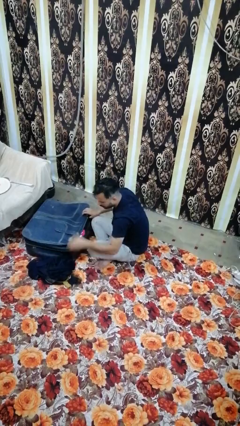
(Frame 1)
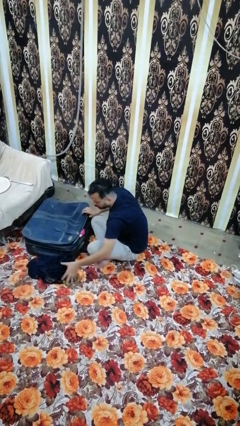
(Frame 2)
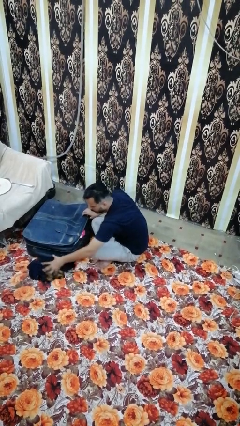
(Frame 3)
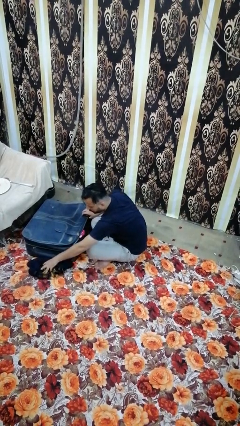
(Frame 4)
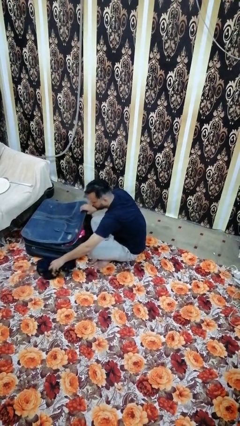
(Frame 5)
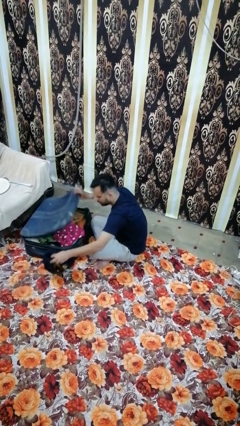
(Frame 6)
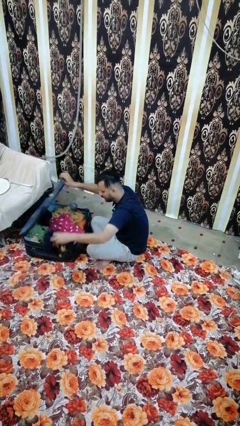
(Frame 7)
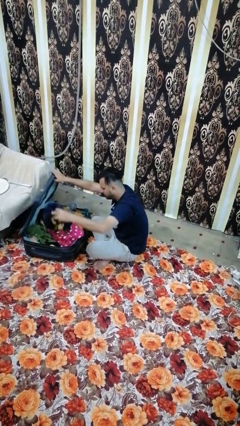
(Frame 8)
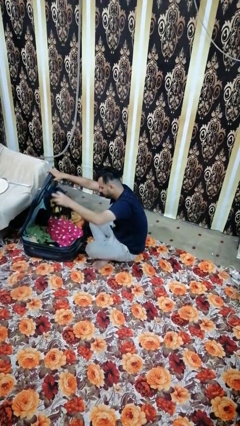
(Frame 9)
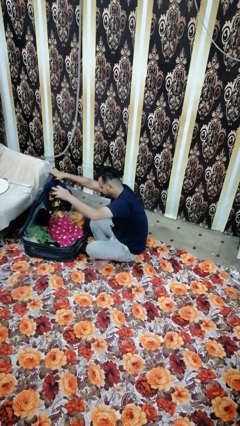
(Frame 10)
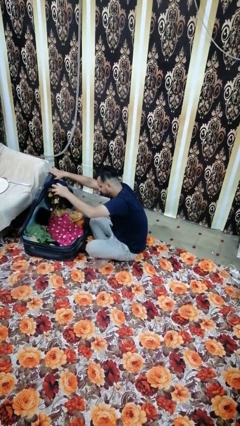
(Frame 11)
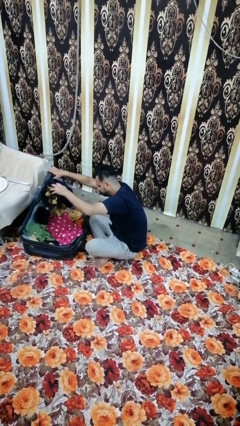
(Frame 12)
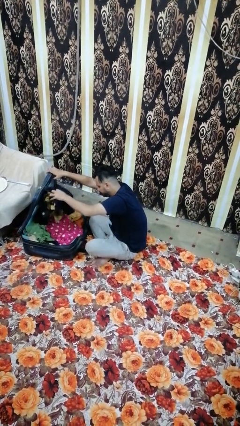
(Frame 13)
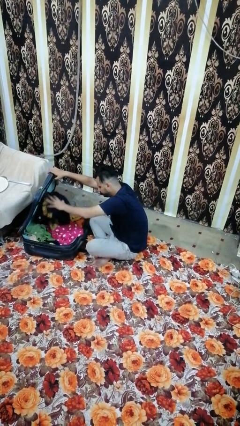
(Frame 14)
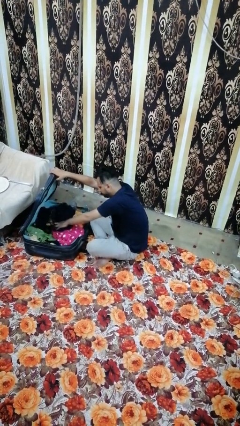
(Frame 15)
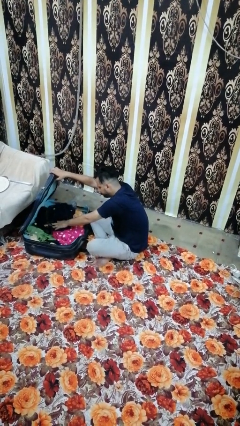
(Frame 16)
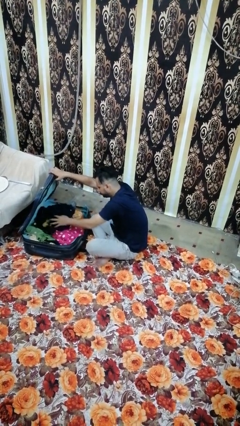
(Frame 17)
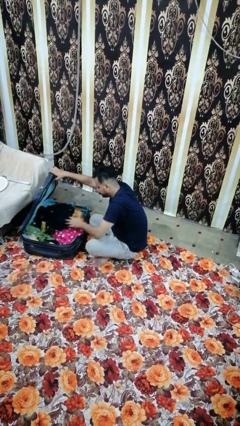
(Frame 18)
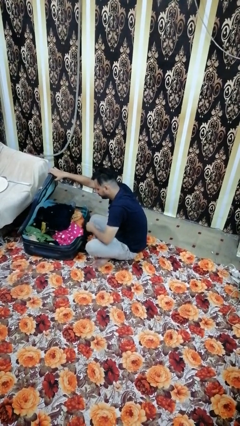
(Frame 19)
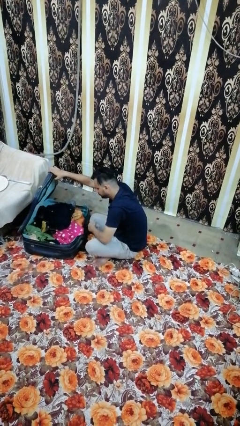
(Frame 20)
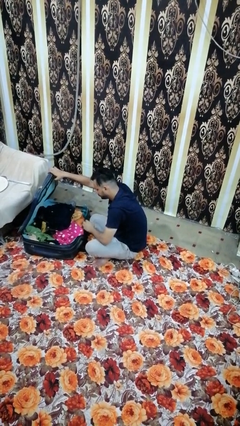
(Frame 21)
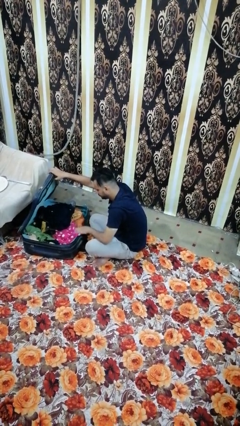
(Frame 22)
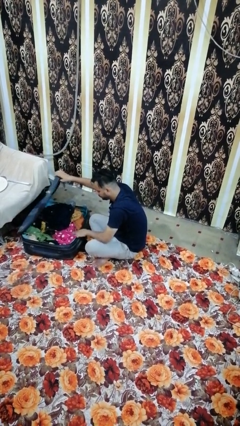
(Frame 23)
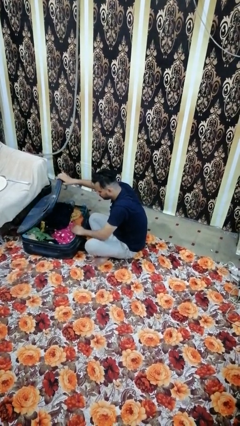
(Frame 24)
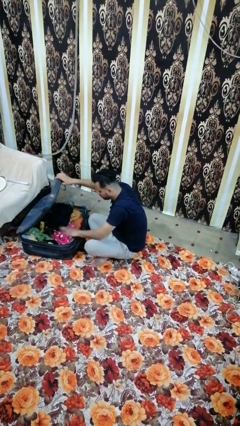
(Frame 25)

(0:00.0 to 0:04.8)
person loads clothes into suitcase

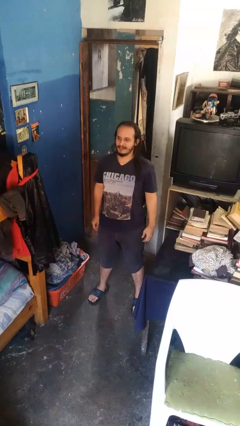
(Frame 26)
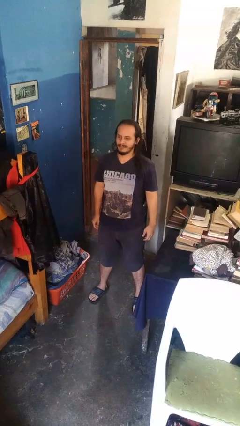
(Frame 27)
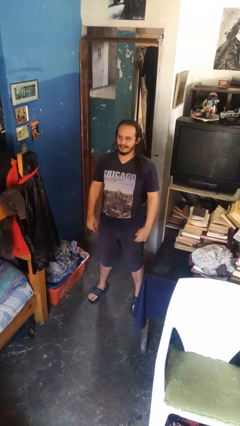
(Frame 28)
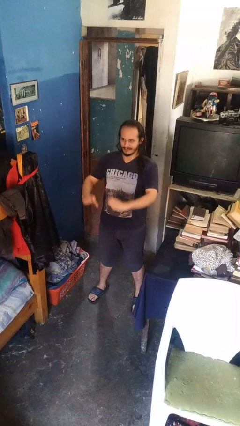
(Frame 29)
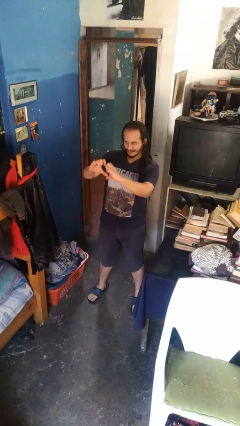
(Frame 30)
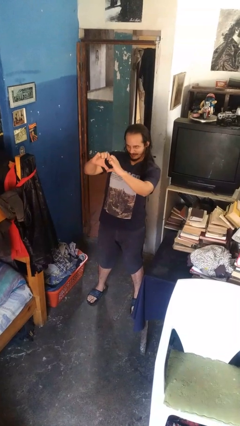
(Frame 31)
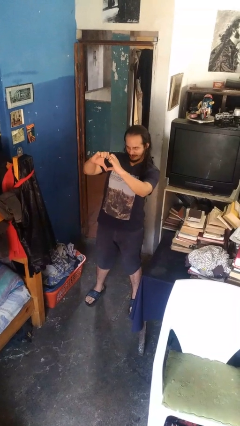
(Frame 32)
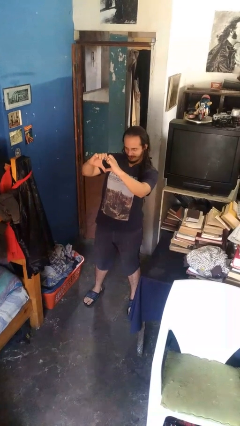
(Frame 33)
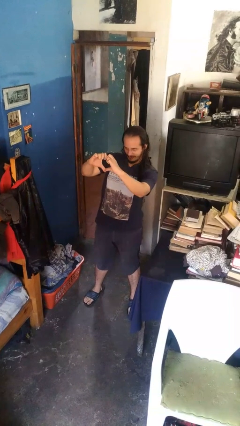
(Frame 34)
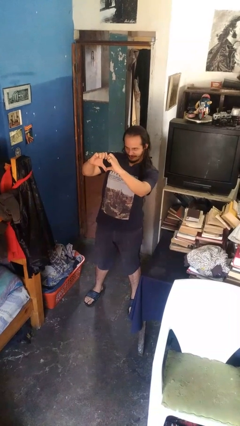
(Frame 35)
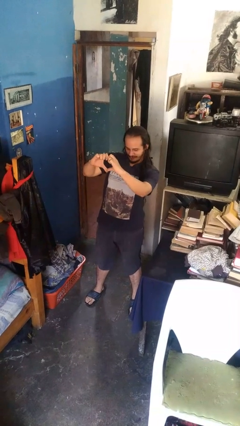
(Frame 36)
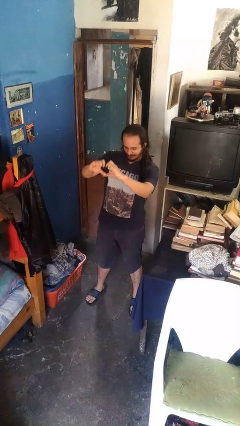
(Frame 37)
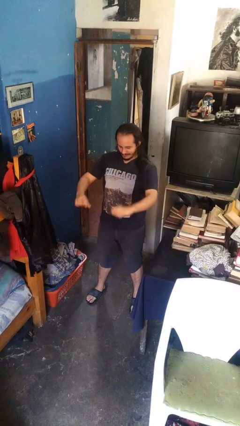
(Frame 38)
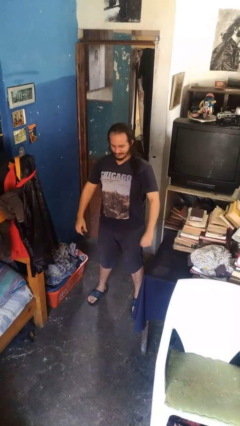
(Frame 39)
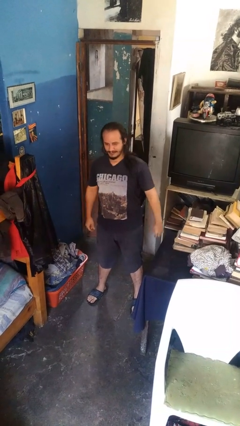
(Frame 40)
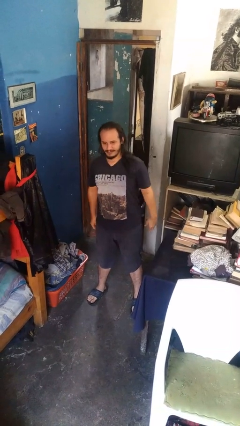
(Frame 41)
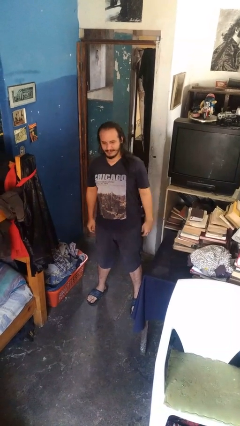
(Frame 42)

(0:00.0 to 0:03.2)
person gestures heart

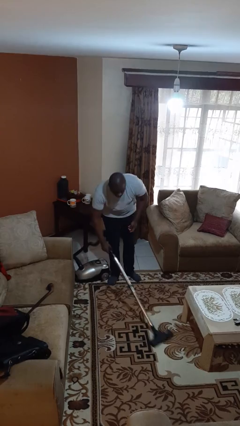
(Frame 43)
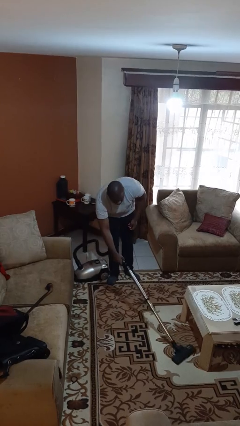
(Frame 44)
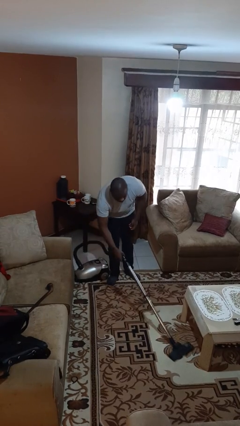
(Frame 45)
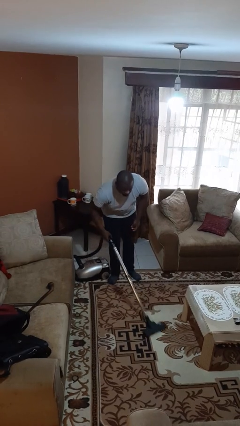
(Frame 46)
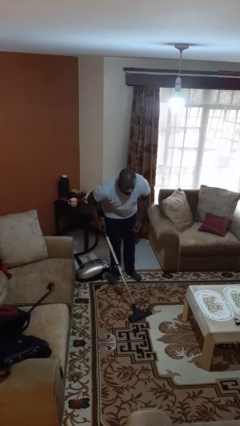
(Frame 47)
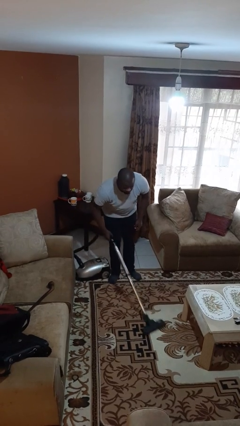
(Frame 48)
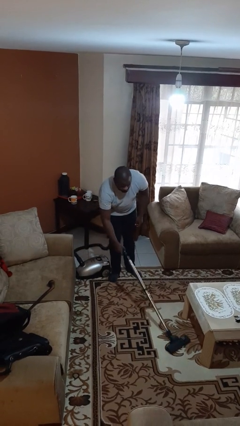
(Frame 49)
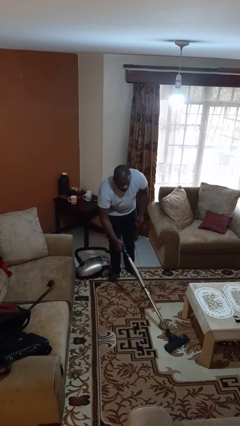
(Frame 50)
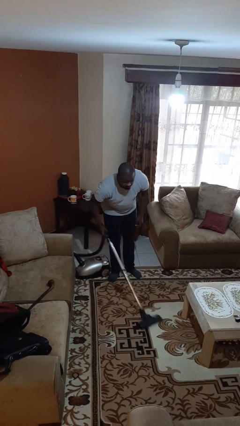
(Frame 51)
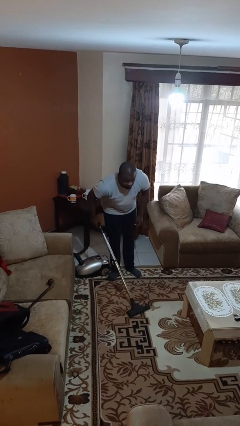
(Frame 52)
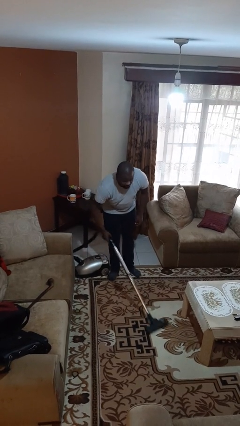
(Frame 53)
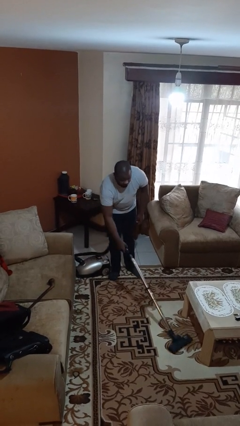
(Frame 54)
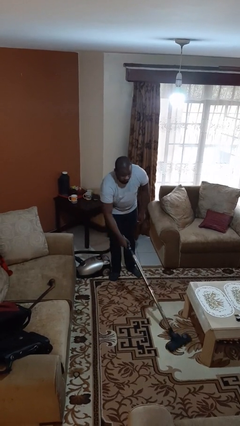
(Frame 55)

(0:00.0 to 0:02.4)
person vacuums carpet

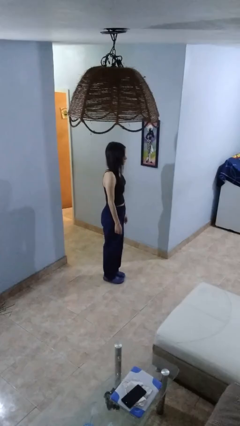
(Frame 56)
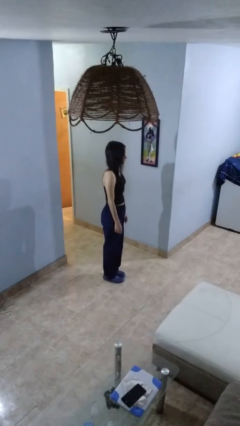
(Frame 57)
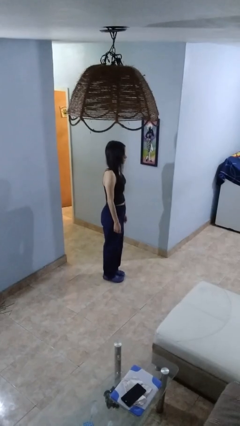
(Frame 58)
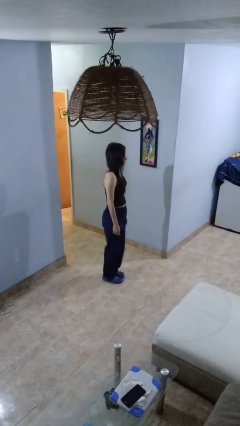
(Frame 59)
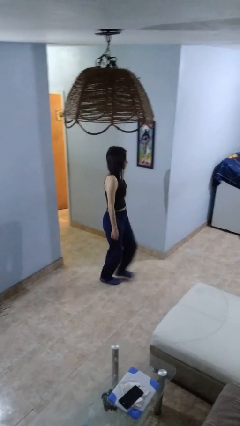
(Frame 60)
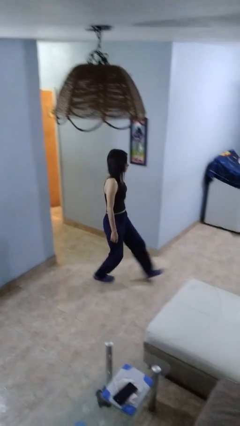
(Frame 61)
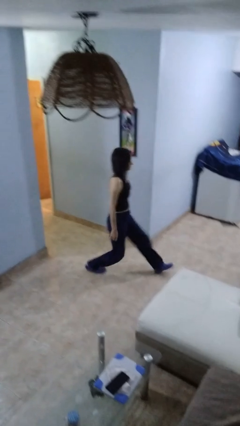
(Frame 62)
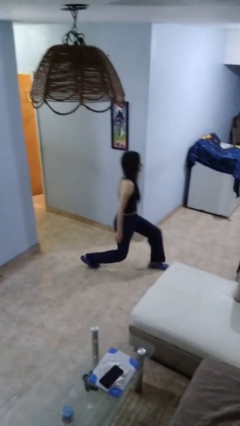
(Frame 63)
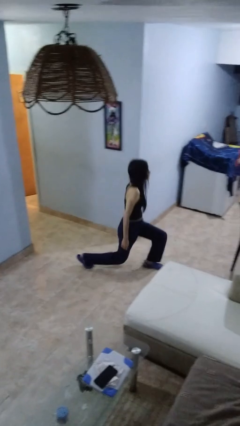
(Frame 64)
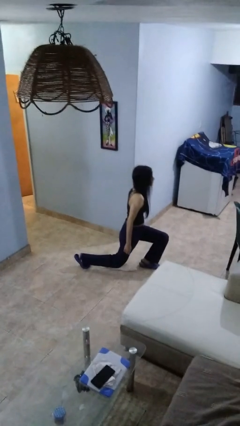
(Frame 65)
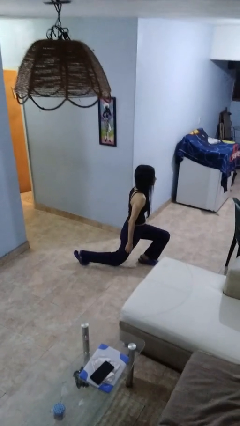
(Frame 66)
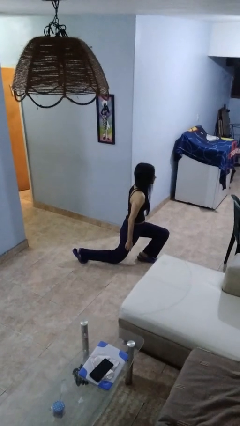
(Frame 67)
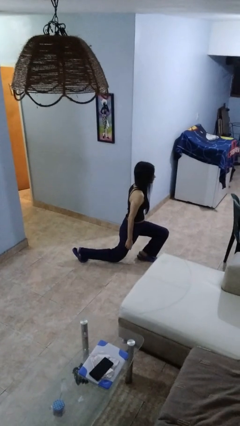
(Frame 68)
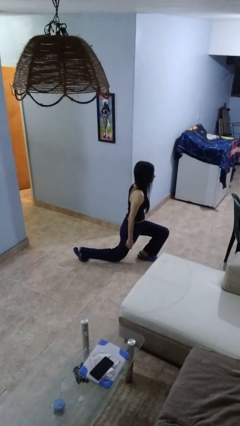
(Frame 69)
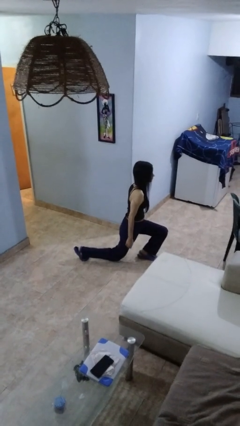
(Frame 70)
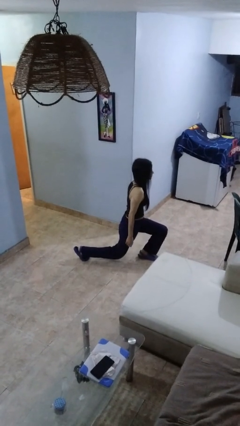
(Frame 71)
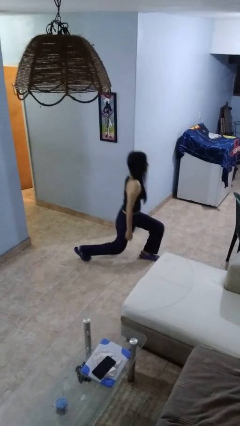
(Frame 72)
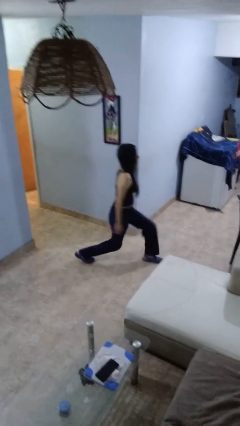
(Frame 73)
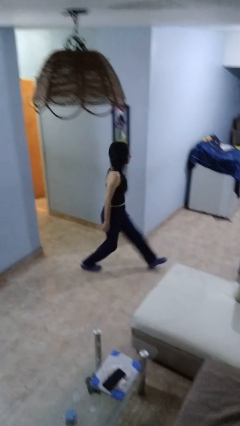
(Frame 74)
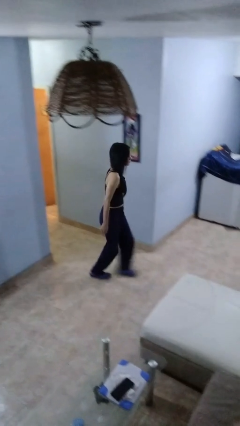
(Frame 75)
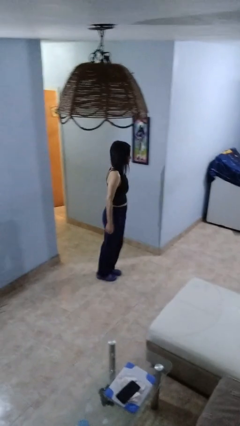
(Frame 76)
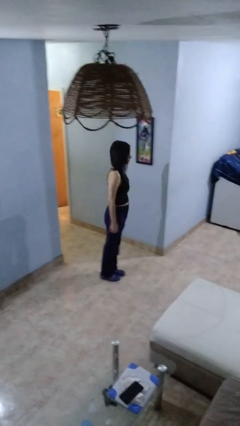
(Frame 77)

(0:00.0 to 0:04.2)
person exercises with lunges

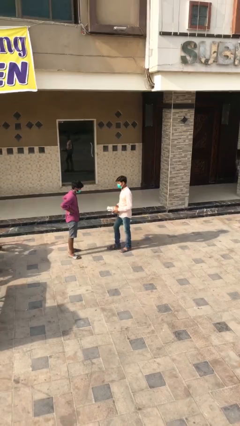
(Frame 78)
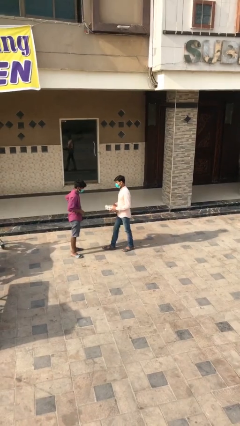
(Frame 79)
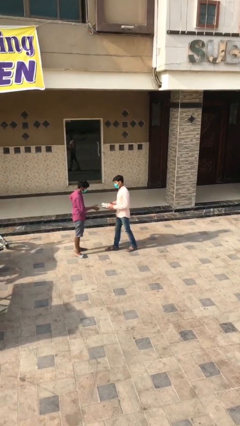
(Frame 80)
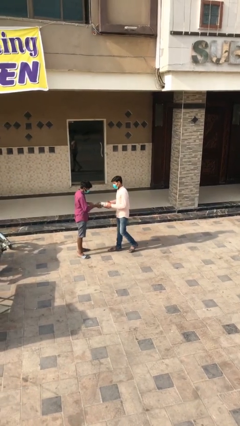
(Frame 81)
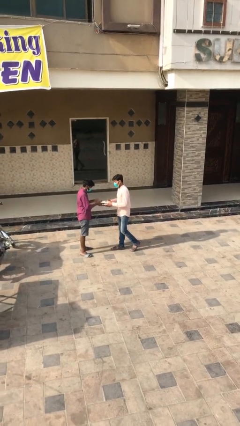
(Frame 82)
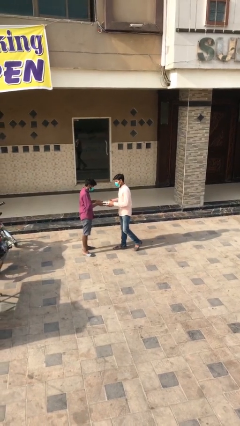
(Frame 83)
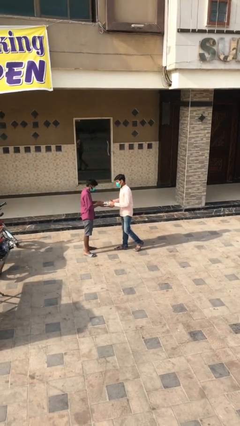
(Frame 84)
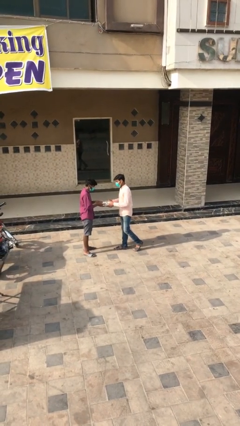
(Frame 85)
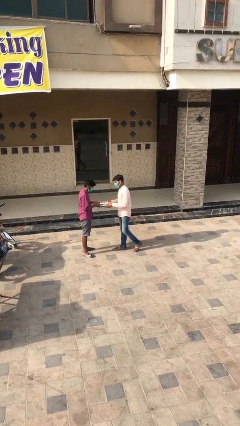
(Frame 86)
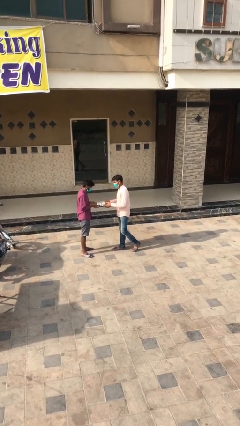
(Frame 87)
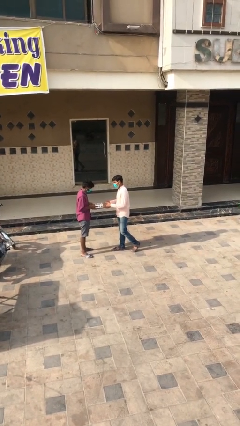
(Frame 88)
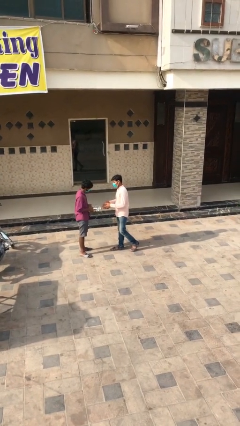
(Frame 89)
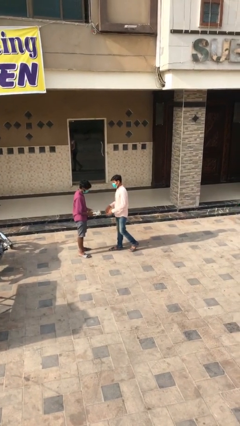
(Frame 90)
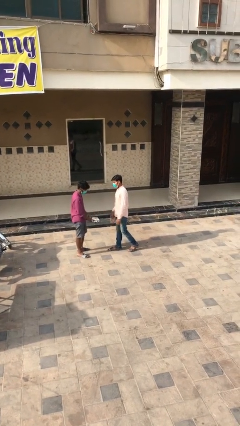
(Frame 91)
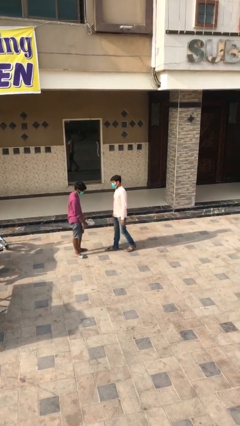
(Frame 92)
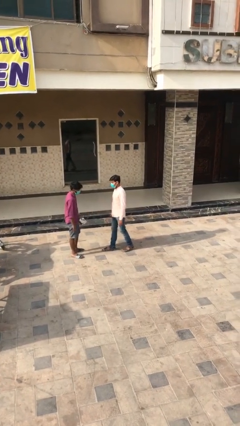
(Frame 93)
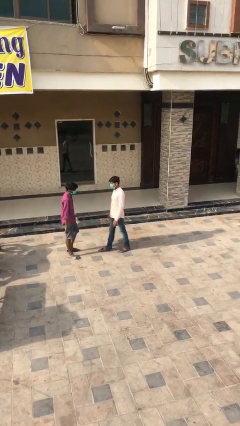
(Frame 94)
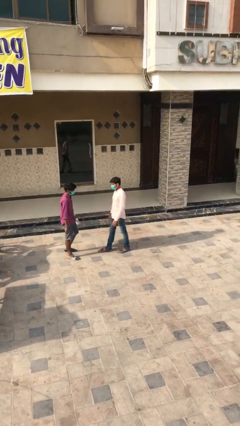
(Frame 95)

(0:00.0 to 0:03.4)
person transfers object to person
